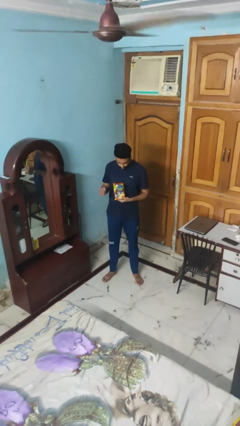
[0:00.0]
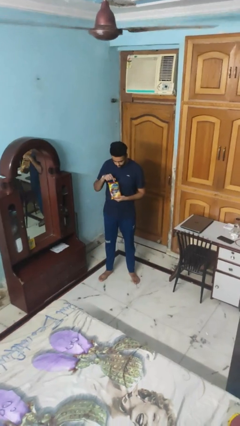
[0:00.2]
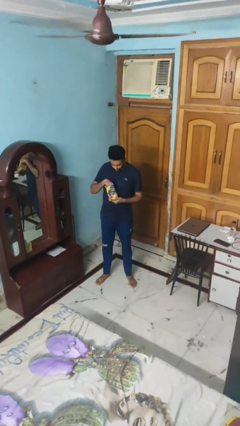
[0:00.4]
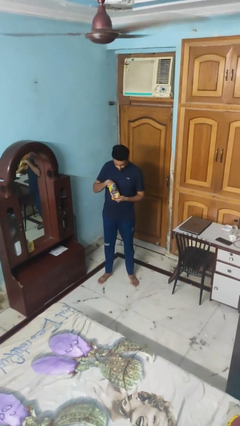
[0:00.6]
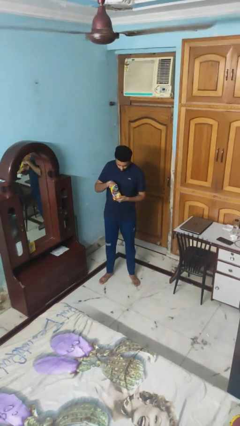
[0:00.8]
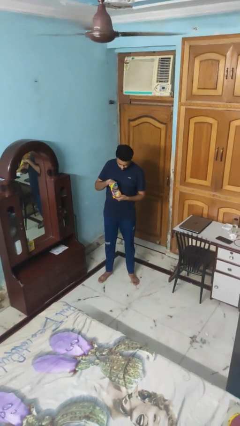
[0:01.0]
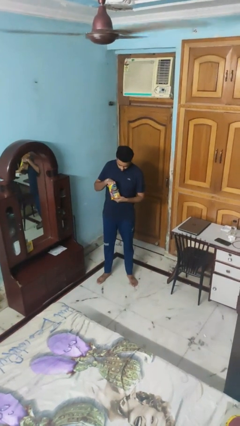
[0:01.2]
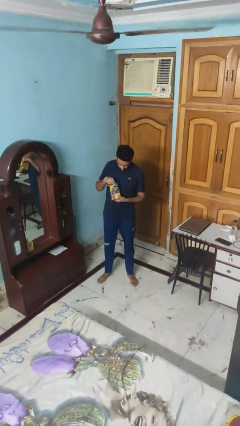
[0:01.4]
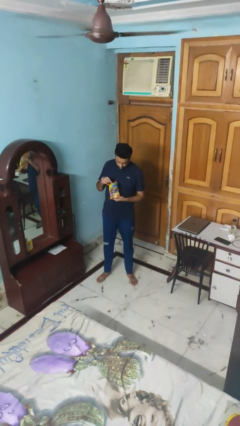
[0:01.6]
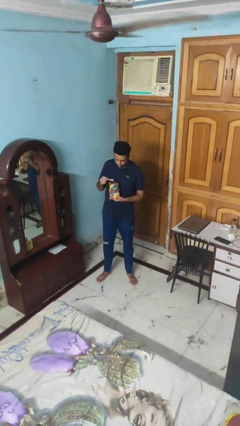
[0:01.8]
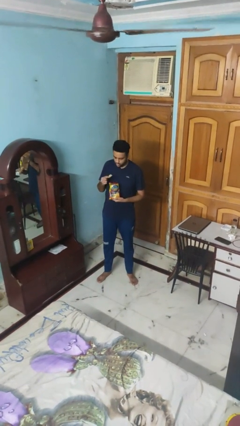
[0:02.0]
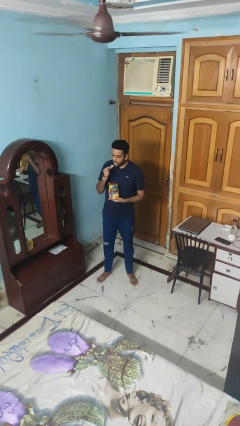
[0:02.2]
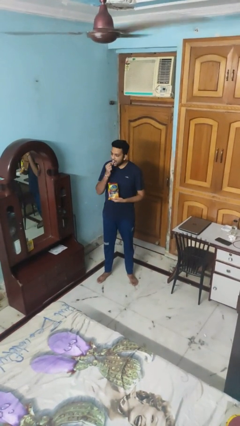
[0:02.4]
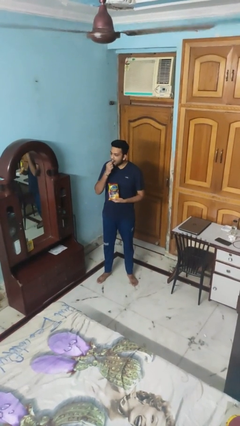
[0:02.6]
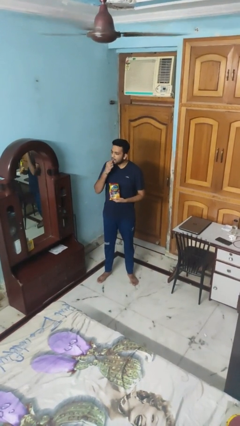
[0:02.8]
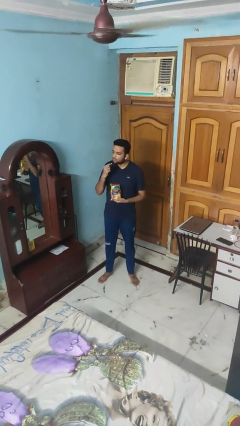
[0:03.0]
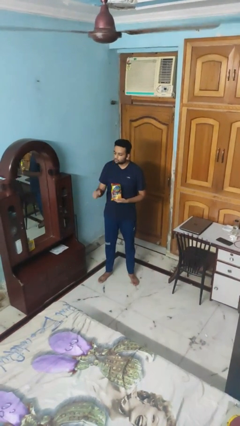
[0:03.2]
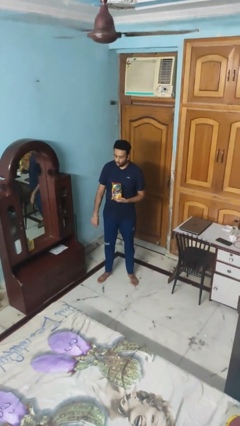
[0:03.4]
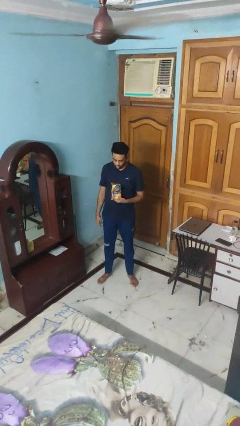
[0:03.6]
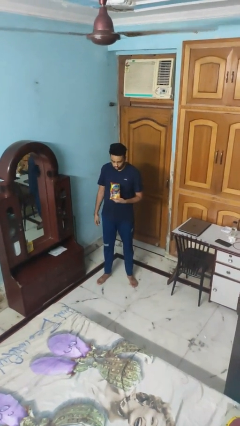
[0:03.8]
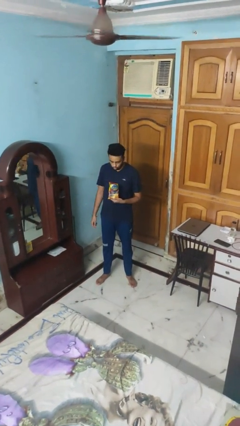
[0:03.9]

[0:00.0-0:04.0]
person eats snack from bag

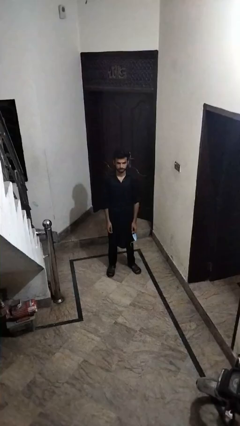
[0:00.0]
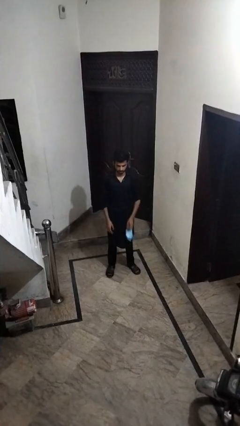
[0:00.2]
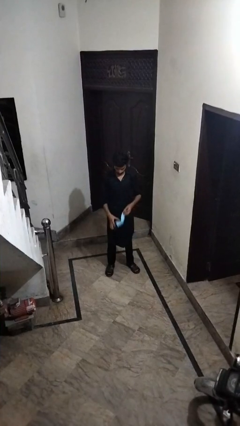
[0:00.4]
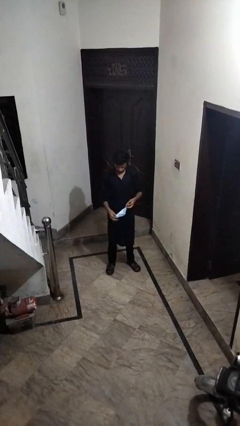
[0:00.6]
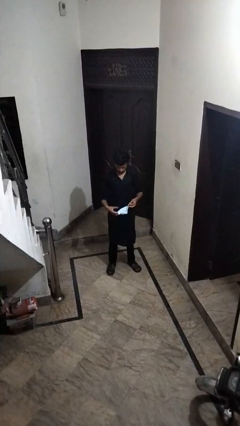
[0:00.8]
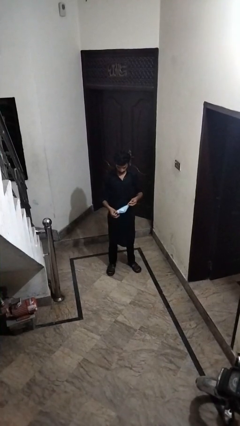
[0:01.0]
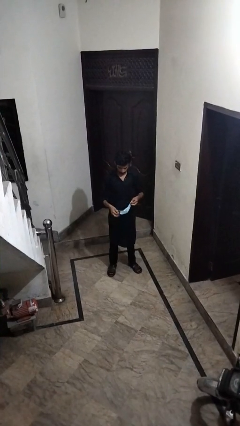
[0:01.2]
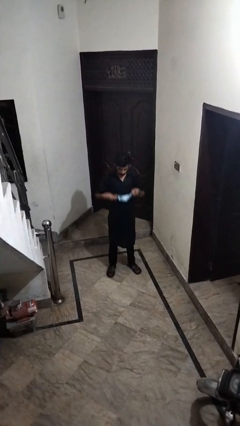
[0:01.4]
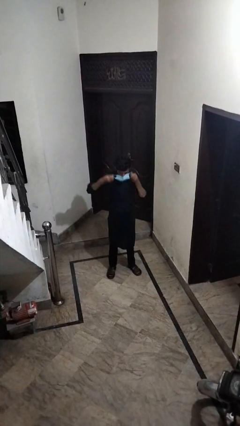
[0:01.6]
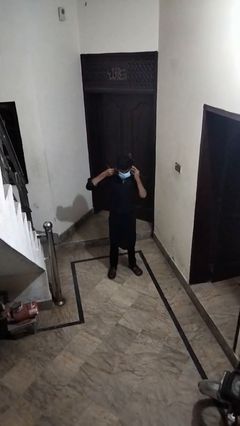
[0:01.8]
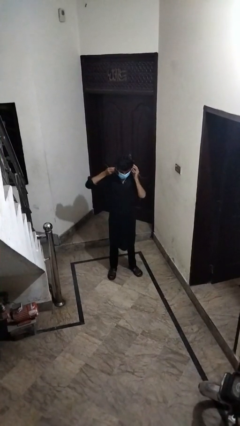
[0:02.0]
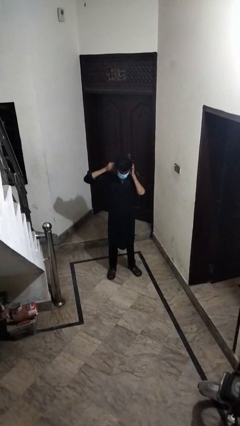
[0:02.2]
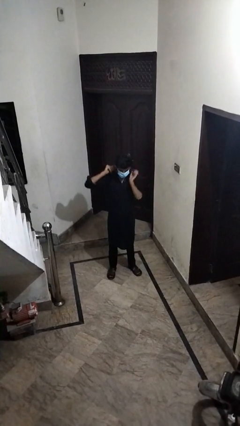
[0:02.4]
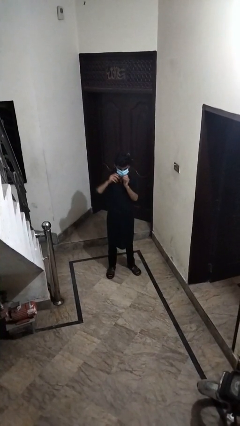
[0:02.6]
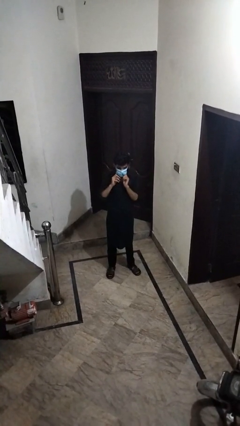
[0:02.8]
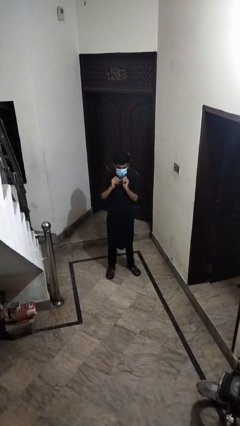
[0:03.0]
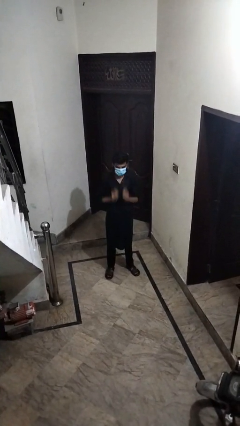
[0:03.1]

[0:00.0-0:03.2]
person puts on facemask

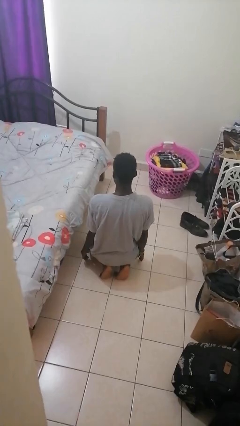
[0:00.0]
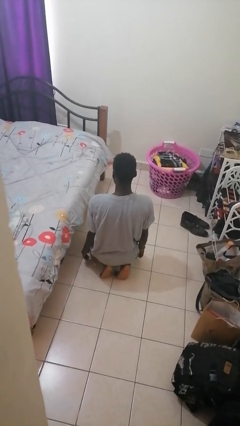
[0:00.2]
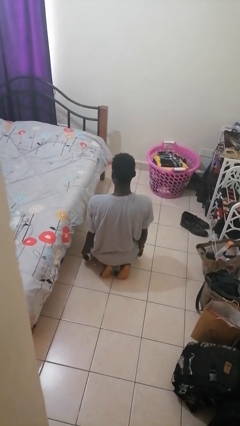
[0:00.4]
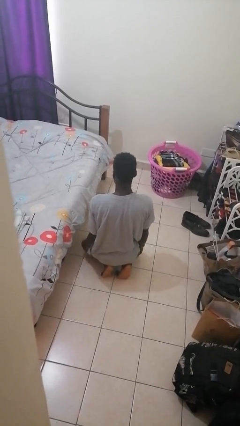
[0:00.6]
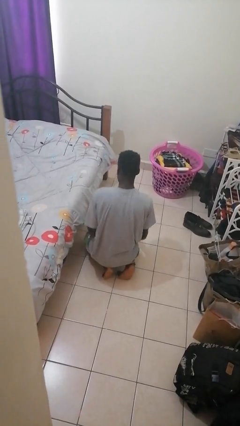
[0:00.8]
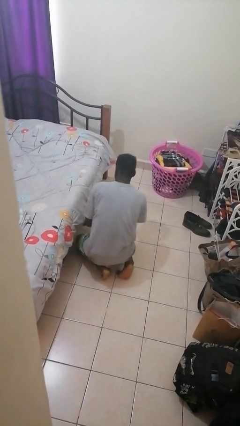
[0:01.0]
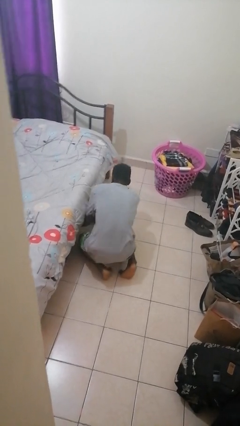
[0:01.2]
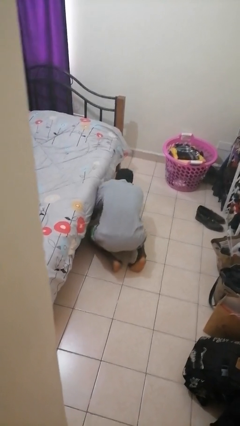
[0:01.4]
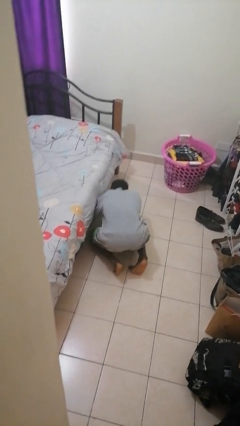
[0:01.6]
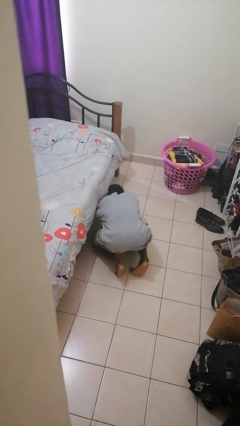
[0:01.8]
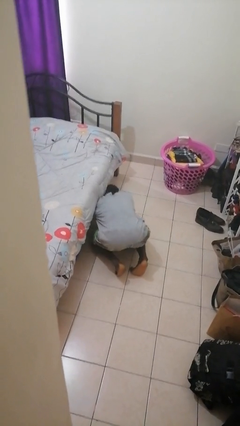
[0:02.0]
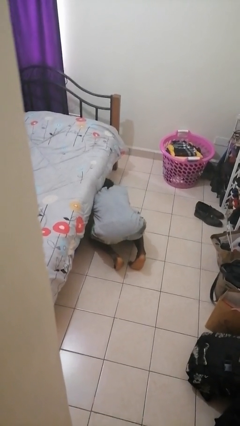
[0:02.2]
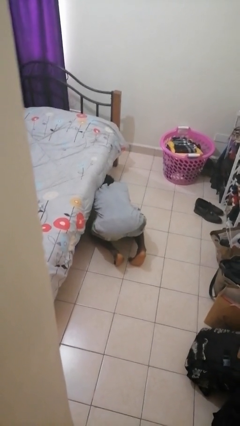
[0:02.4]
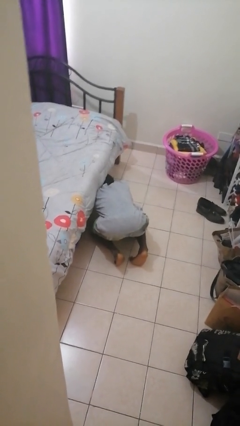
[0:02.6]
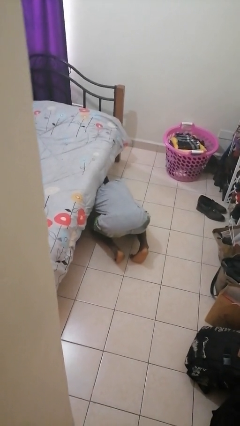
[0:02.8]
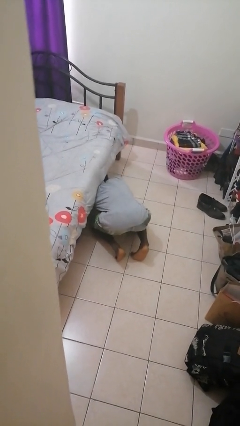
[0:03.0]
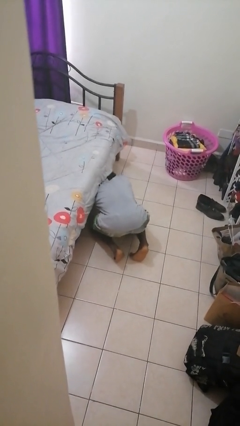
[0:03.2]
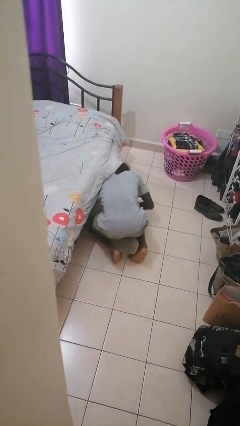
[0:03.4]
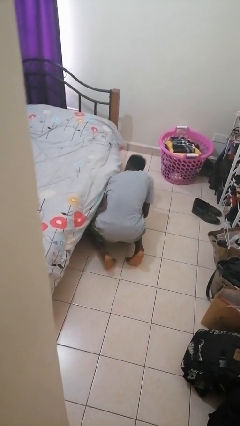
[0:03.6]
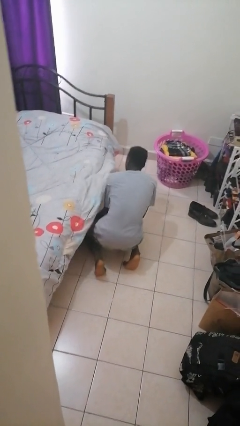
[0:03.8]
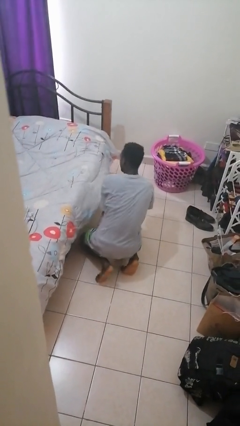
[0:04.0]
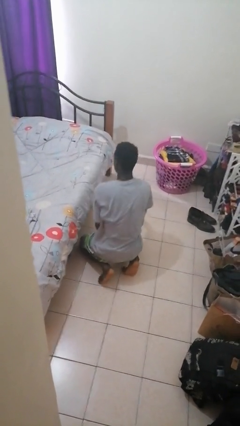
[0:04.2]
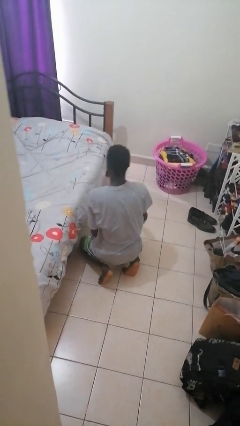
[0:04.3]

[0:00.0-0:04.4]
person searches under bed

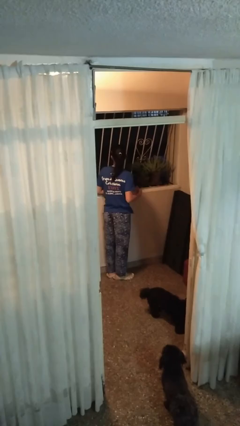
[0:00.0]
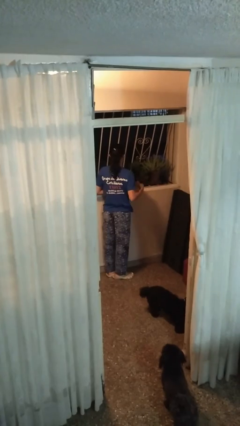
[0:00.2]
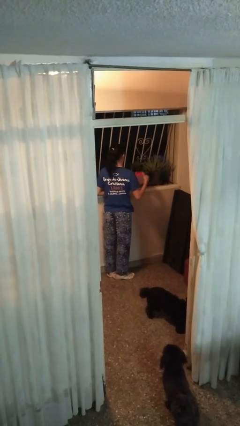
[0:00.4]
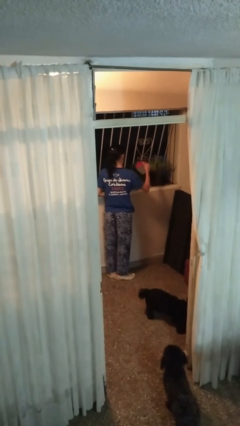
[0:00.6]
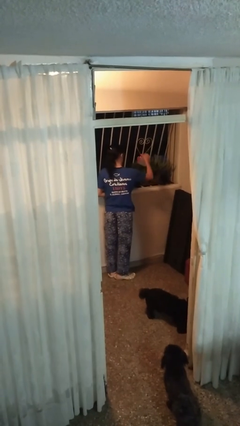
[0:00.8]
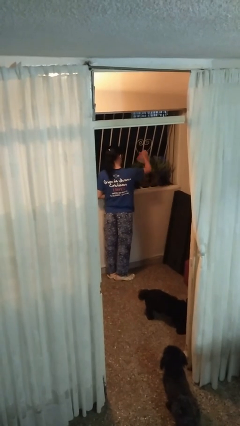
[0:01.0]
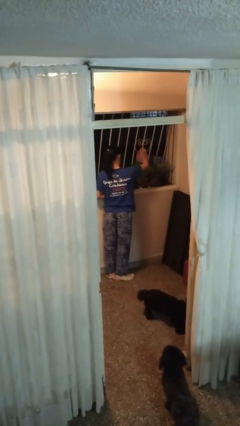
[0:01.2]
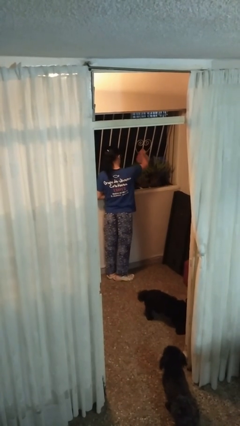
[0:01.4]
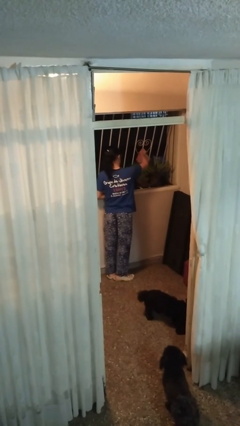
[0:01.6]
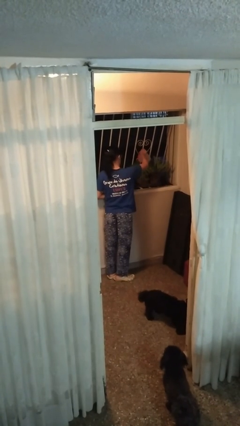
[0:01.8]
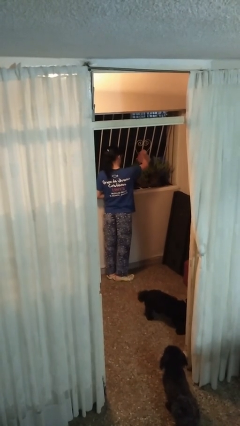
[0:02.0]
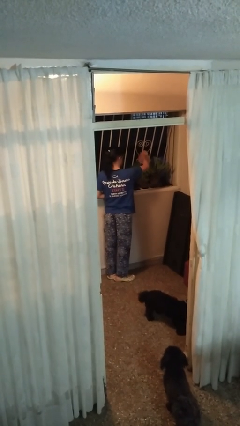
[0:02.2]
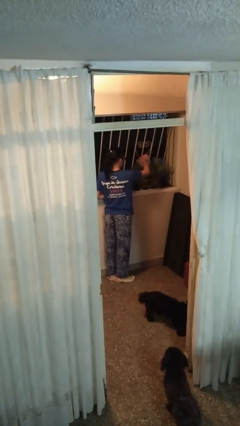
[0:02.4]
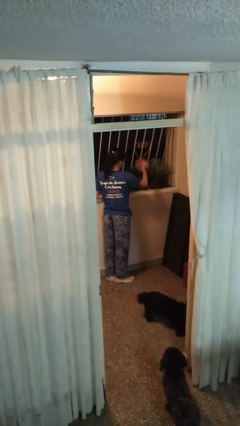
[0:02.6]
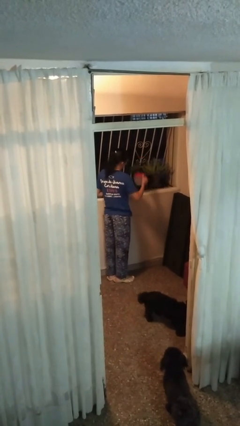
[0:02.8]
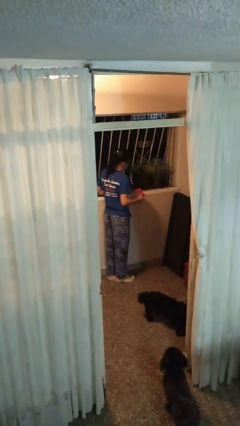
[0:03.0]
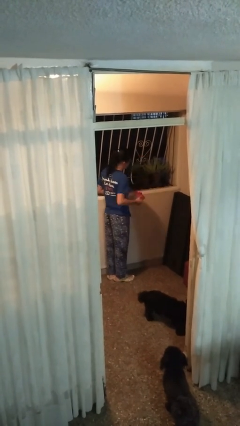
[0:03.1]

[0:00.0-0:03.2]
person waters houseplant

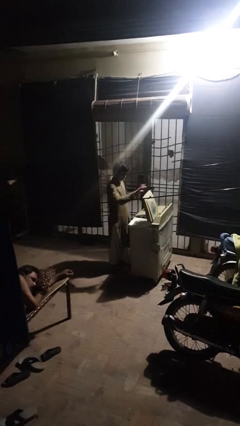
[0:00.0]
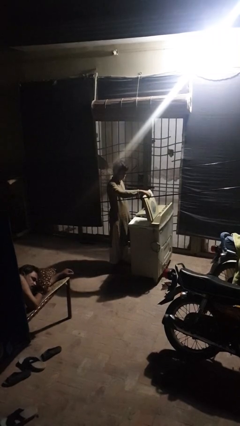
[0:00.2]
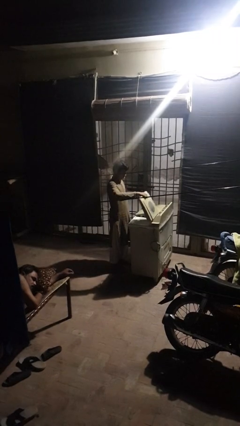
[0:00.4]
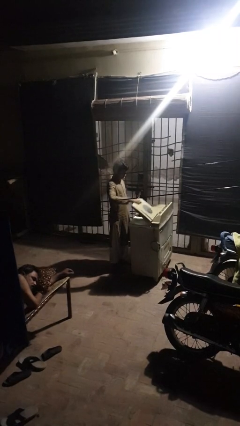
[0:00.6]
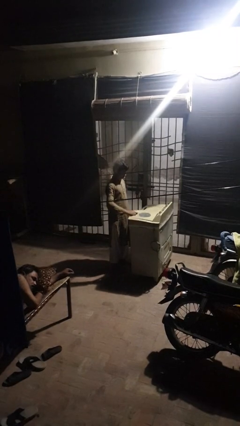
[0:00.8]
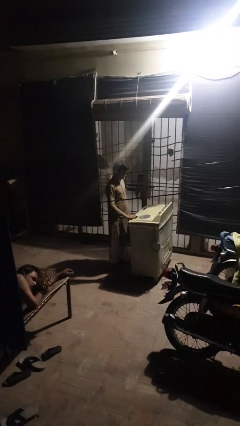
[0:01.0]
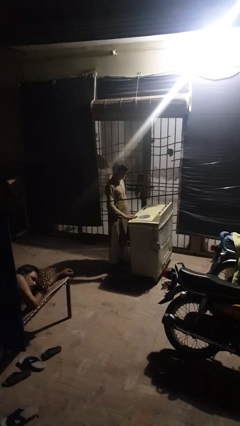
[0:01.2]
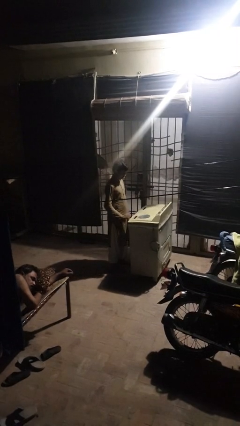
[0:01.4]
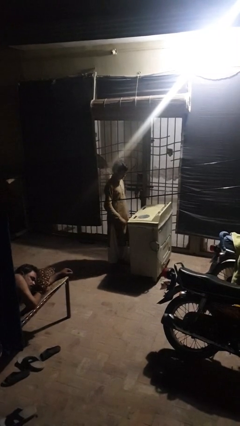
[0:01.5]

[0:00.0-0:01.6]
person closes clothes washer

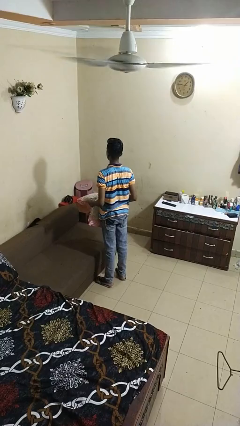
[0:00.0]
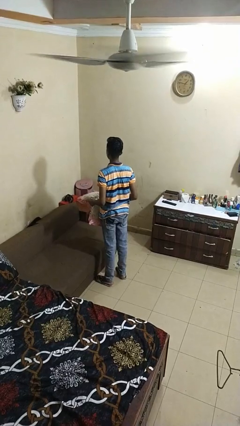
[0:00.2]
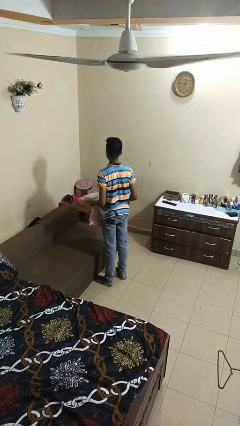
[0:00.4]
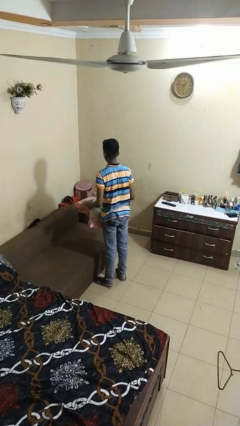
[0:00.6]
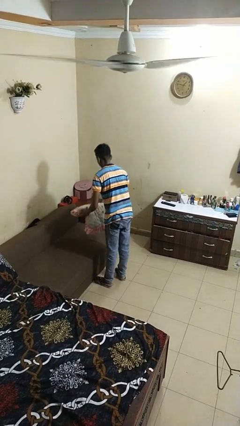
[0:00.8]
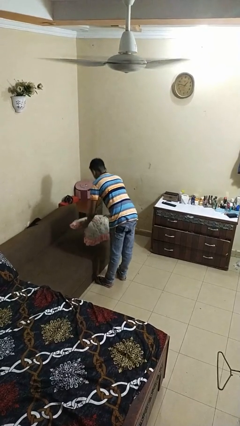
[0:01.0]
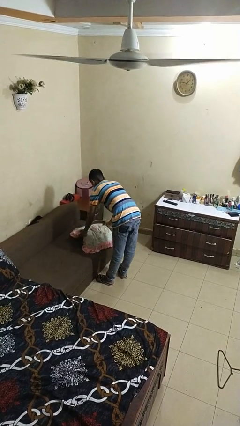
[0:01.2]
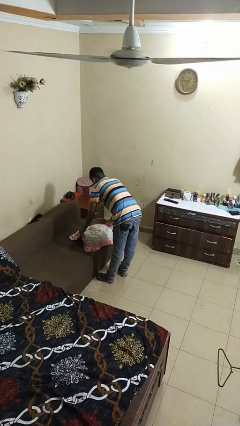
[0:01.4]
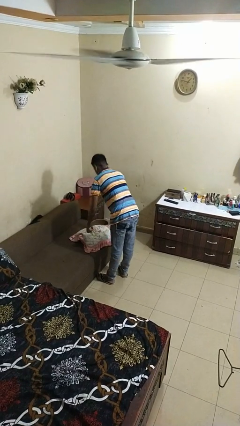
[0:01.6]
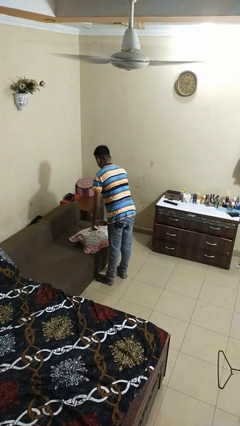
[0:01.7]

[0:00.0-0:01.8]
person puts down object on couch
